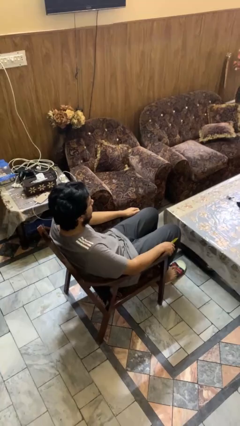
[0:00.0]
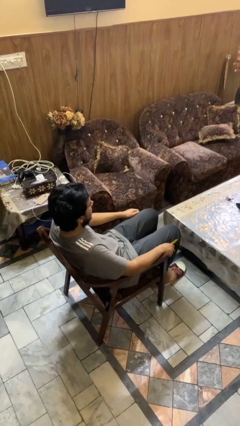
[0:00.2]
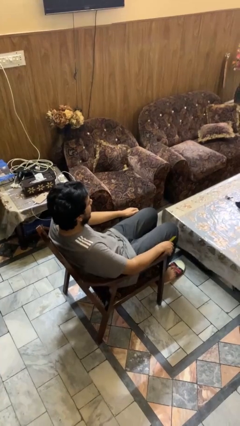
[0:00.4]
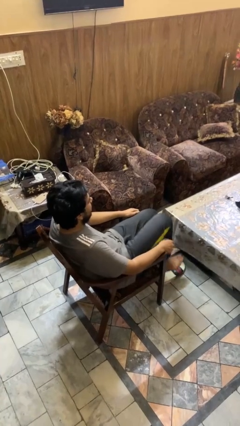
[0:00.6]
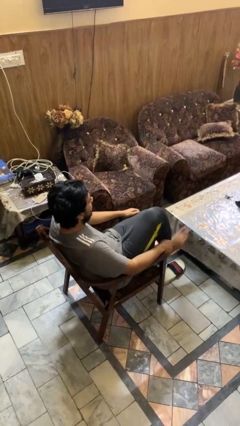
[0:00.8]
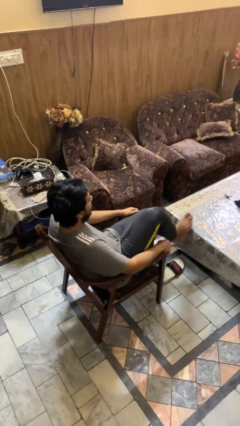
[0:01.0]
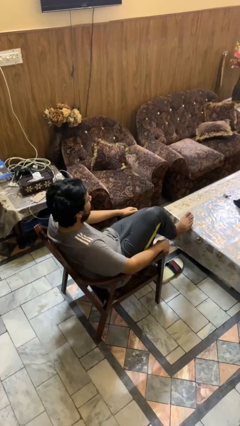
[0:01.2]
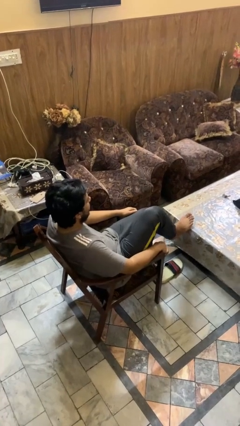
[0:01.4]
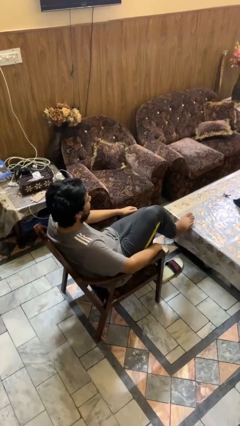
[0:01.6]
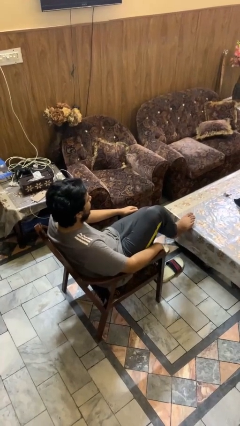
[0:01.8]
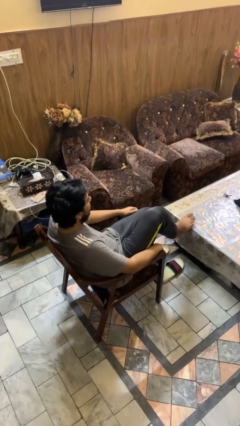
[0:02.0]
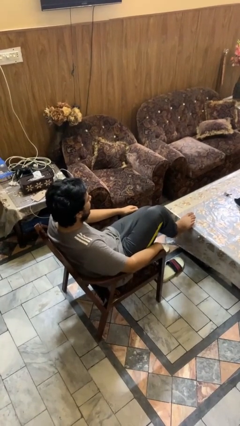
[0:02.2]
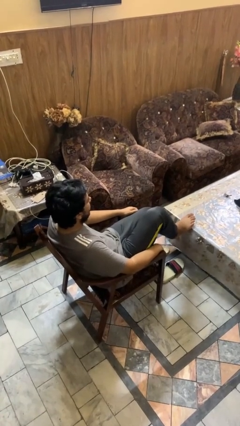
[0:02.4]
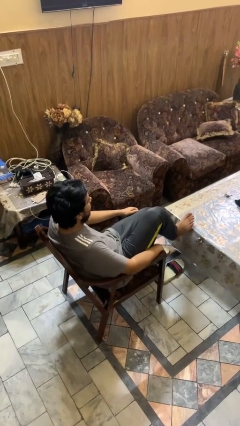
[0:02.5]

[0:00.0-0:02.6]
person puts feet up

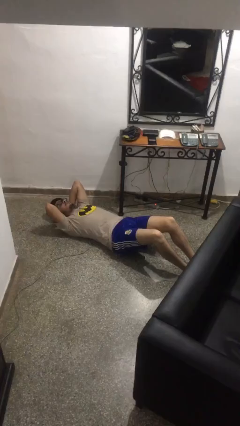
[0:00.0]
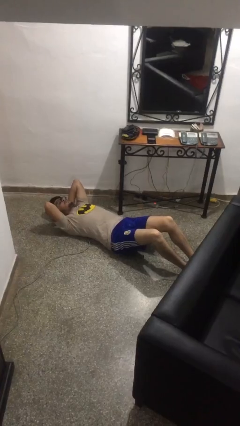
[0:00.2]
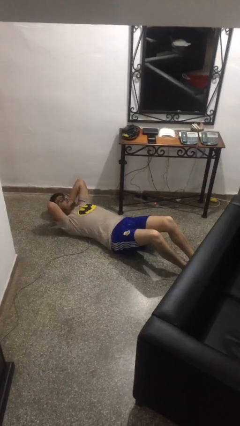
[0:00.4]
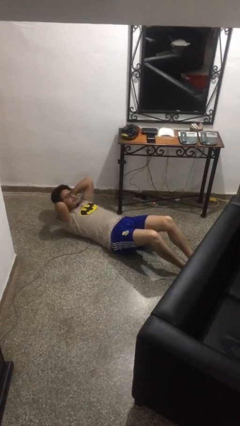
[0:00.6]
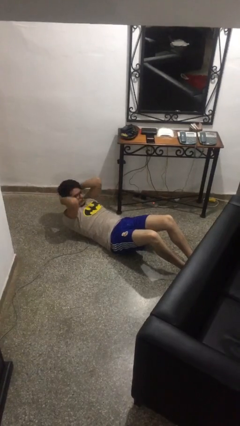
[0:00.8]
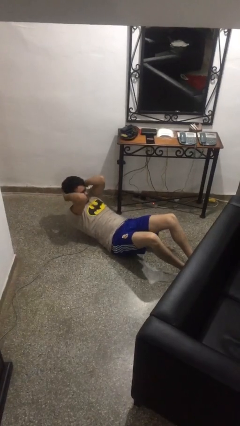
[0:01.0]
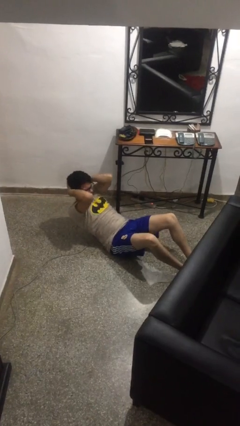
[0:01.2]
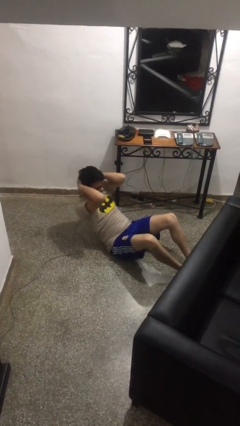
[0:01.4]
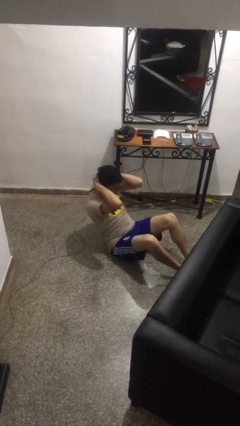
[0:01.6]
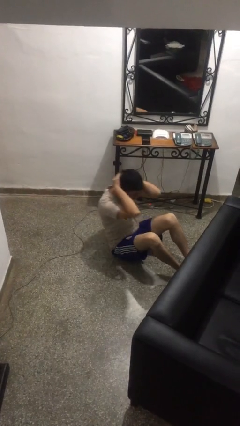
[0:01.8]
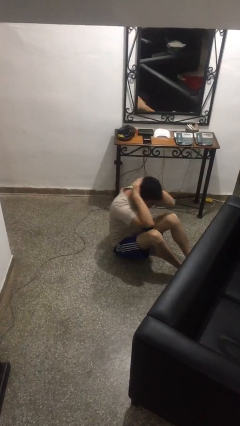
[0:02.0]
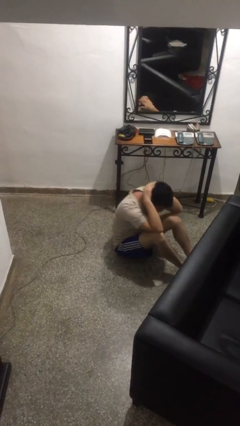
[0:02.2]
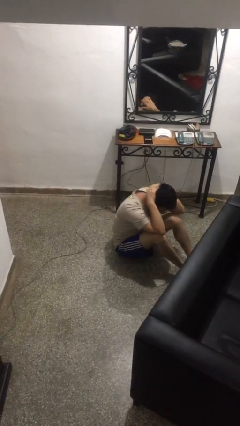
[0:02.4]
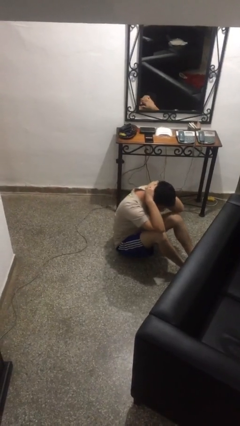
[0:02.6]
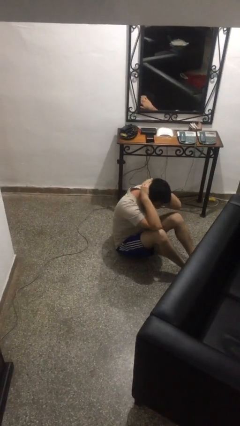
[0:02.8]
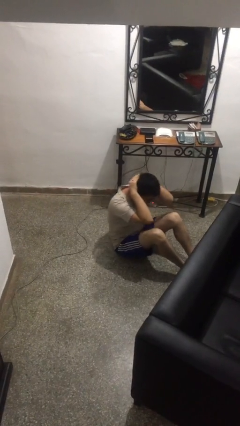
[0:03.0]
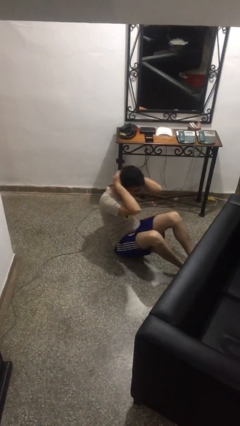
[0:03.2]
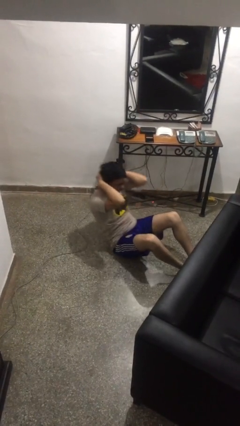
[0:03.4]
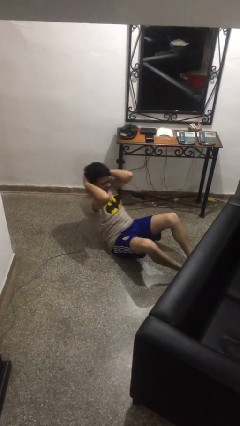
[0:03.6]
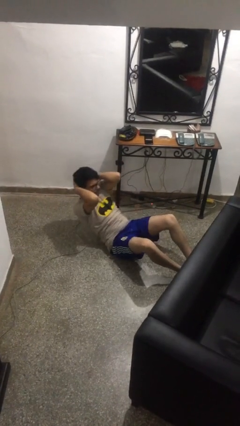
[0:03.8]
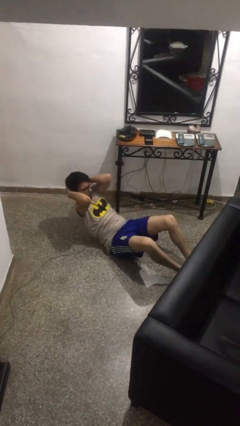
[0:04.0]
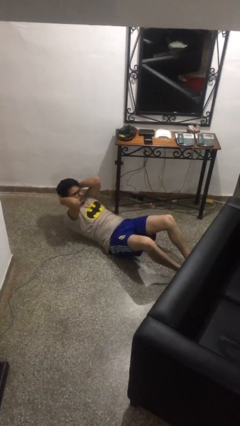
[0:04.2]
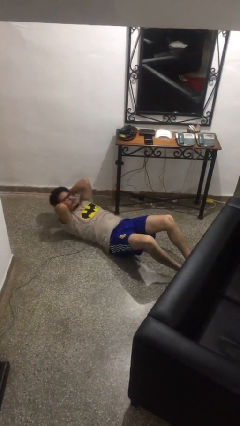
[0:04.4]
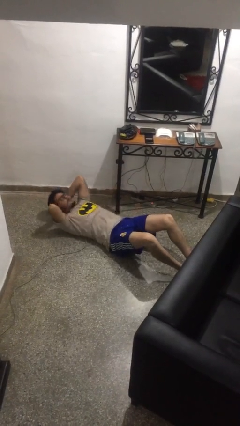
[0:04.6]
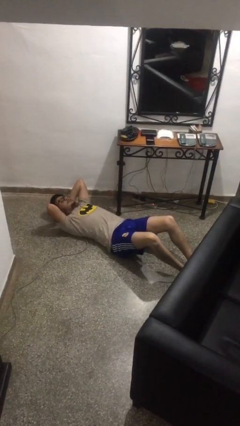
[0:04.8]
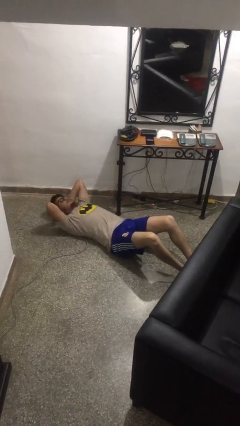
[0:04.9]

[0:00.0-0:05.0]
person exercises with situp

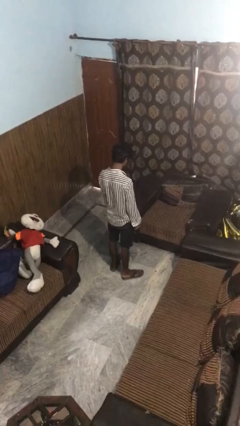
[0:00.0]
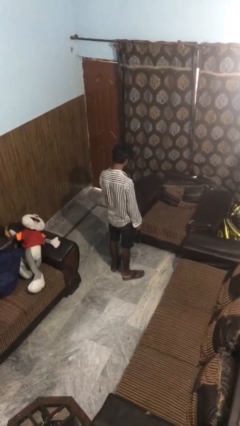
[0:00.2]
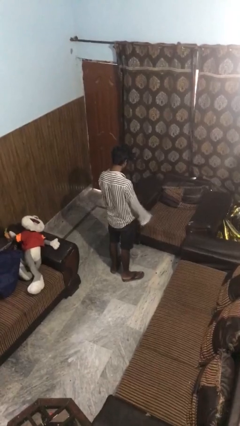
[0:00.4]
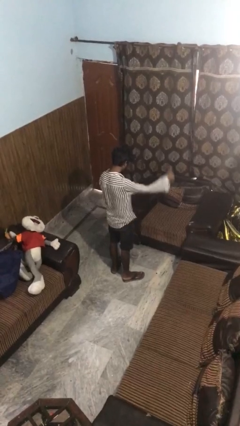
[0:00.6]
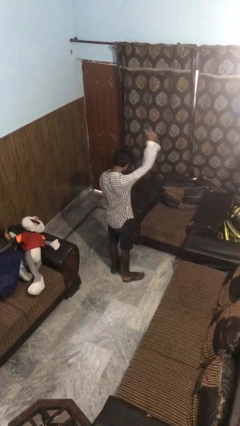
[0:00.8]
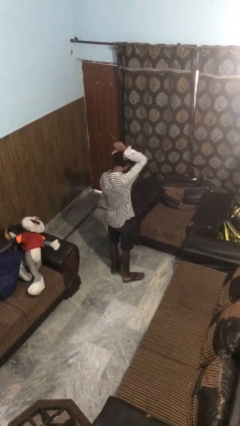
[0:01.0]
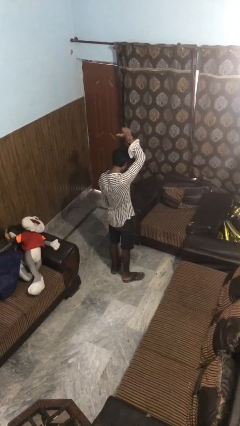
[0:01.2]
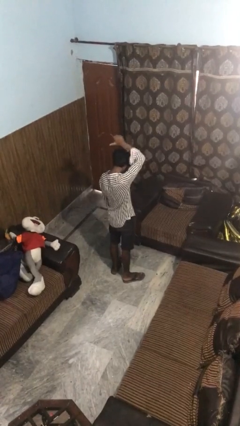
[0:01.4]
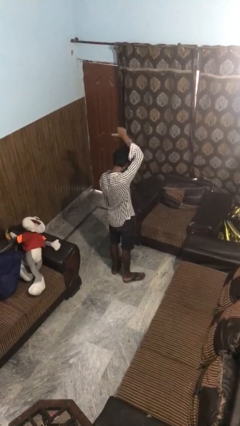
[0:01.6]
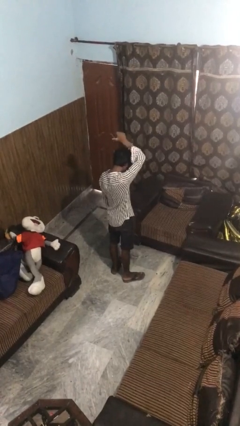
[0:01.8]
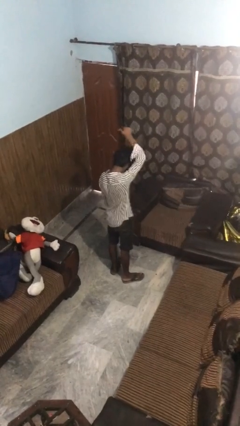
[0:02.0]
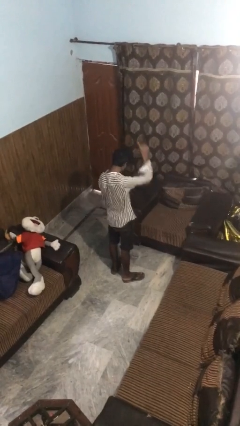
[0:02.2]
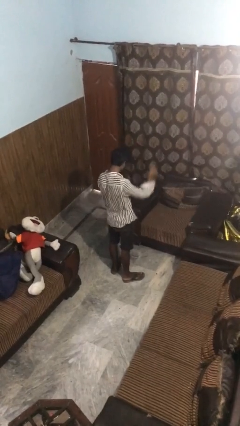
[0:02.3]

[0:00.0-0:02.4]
person gestures behind me

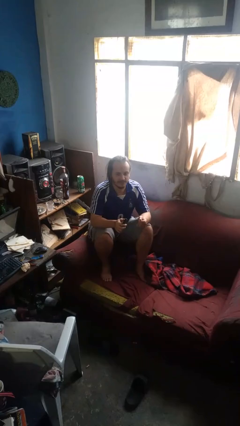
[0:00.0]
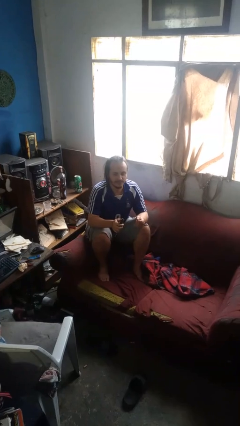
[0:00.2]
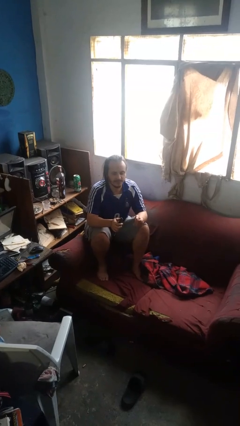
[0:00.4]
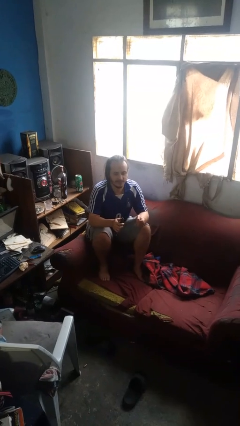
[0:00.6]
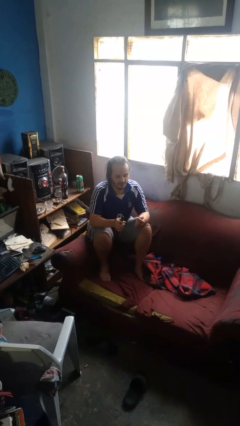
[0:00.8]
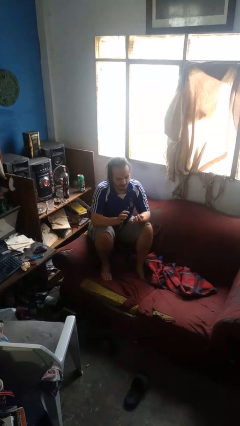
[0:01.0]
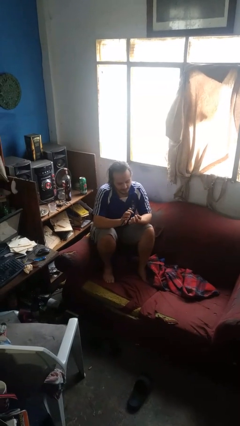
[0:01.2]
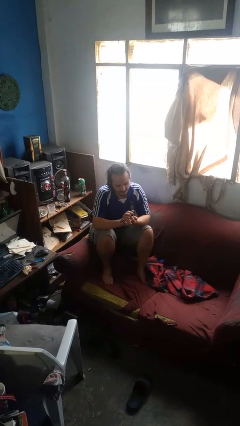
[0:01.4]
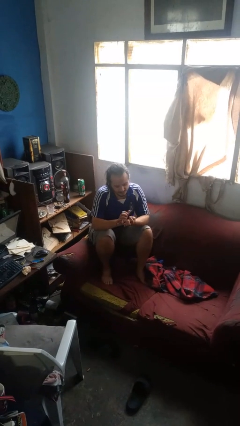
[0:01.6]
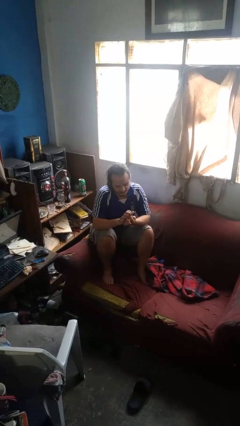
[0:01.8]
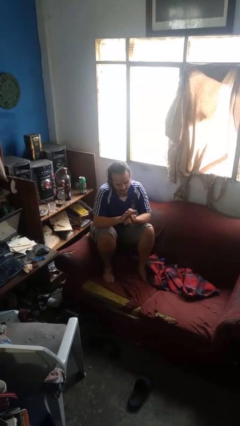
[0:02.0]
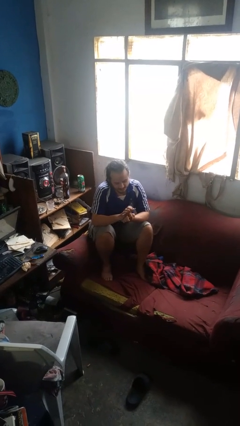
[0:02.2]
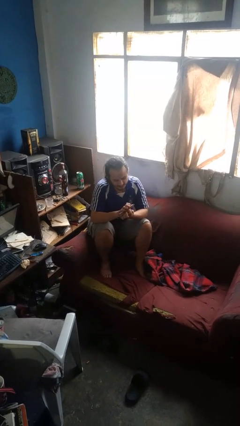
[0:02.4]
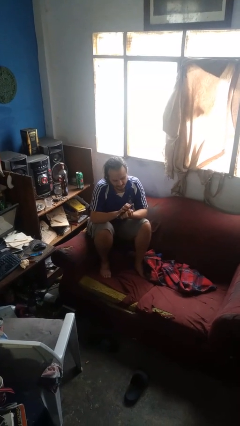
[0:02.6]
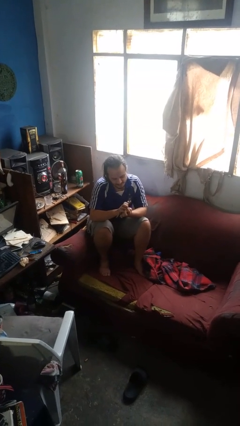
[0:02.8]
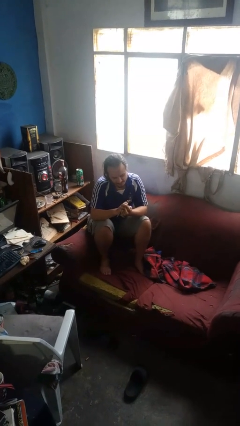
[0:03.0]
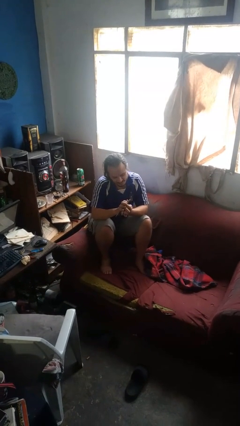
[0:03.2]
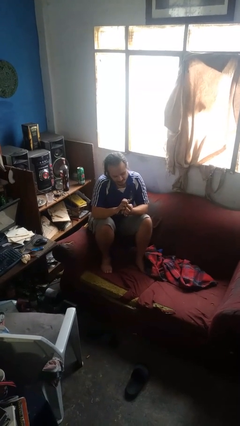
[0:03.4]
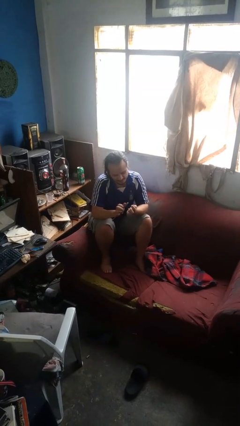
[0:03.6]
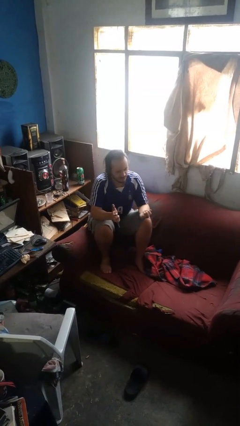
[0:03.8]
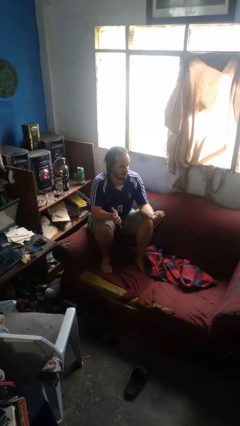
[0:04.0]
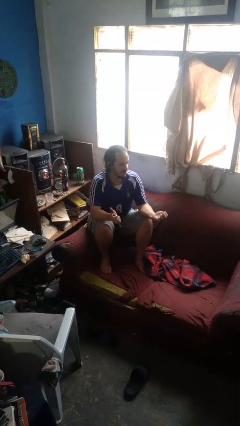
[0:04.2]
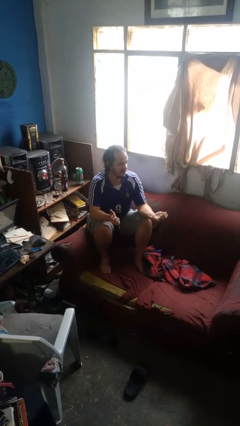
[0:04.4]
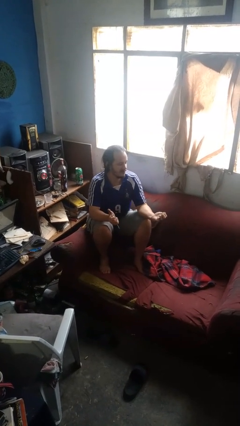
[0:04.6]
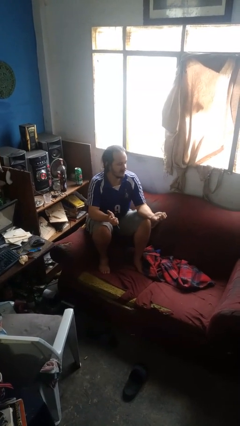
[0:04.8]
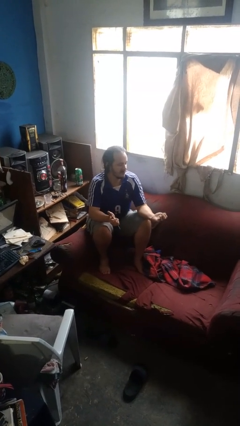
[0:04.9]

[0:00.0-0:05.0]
person files fingernails

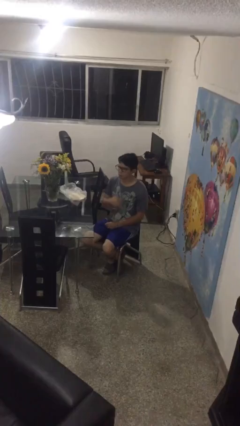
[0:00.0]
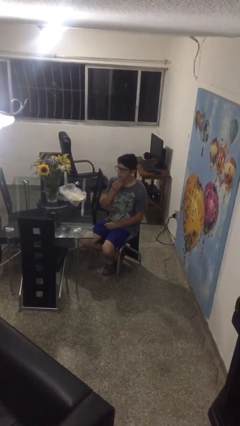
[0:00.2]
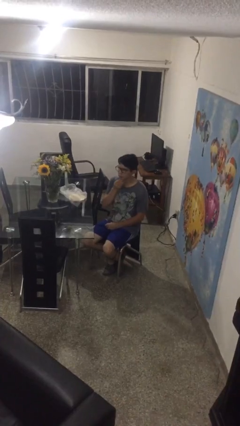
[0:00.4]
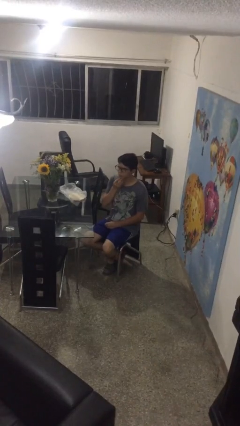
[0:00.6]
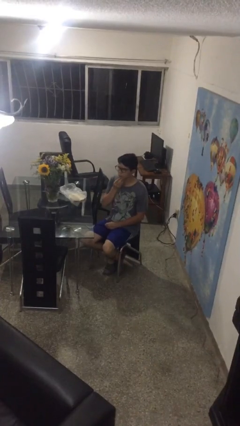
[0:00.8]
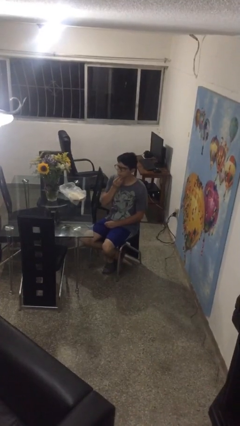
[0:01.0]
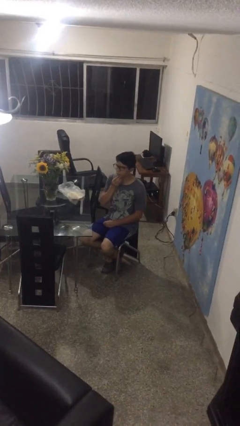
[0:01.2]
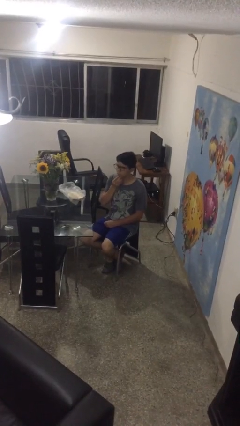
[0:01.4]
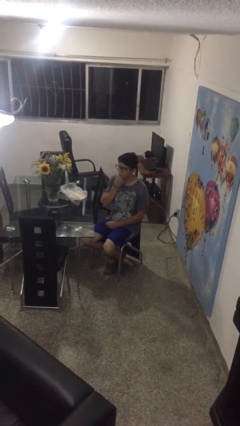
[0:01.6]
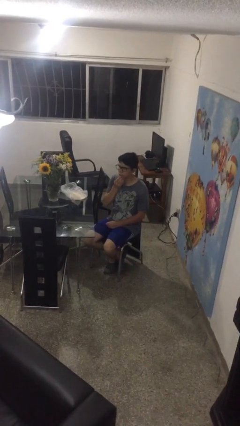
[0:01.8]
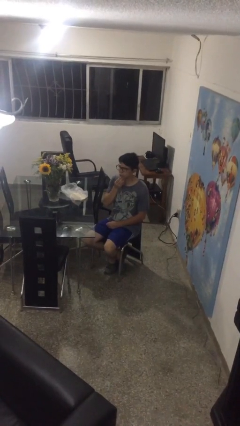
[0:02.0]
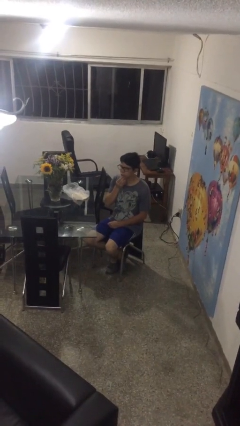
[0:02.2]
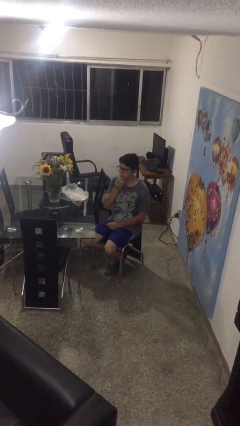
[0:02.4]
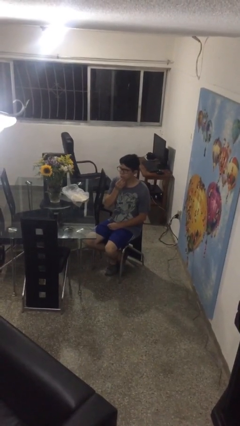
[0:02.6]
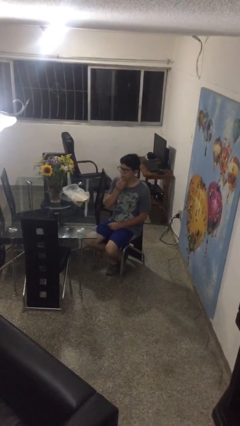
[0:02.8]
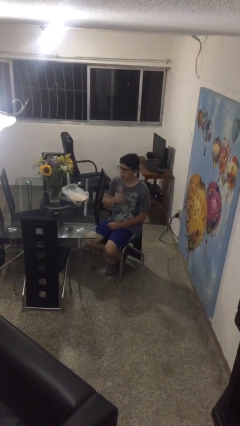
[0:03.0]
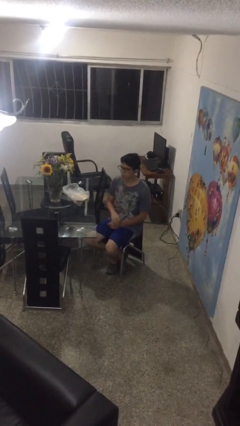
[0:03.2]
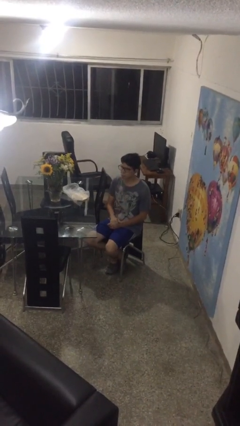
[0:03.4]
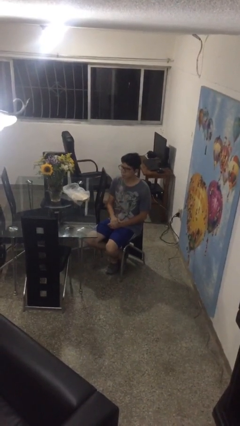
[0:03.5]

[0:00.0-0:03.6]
person strokes chin
